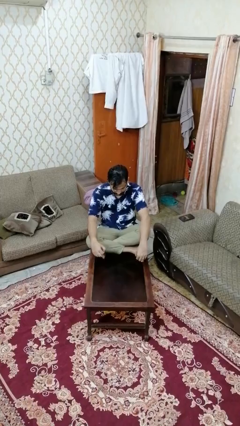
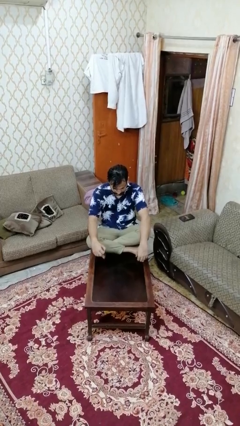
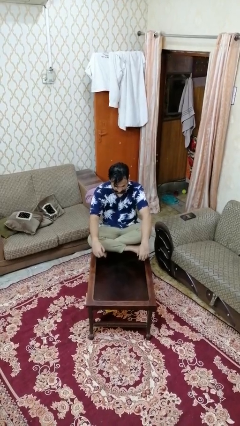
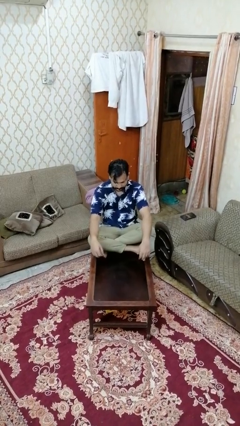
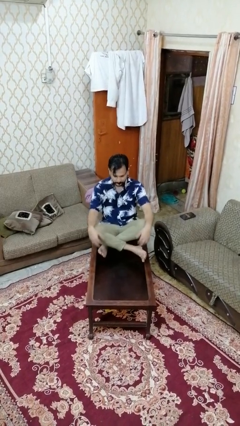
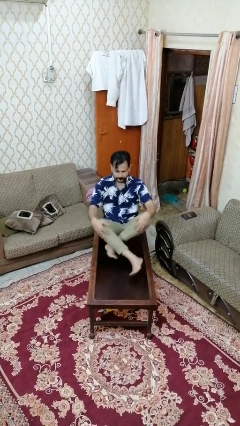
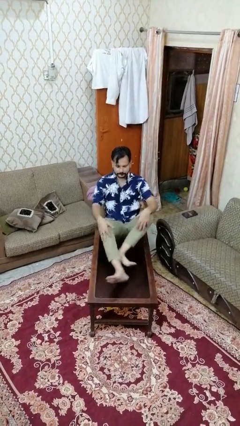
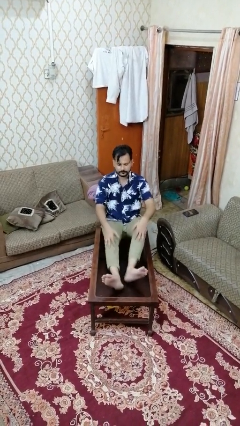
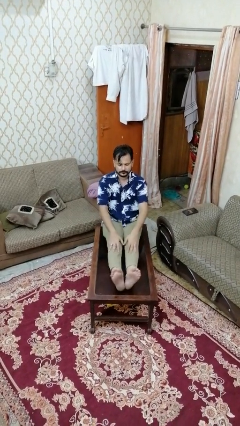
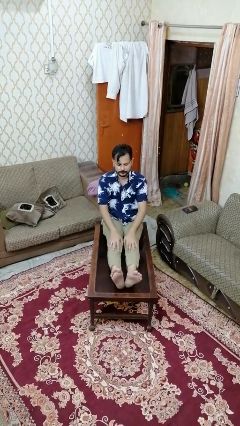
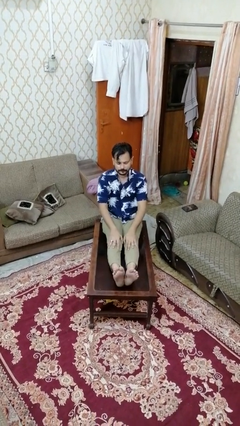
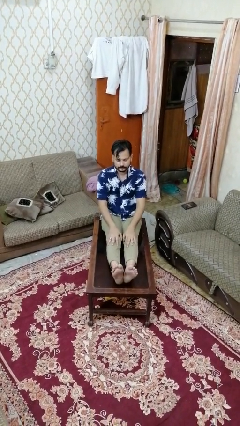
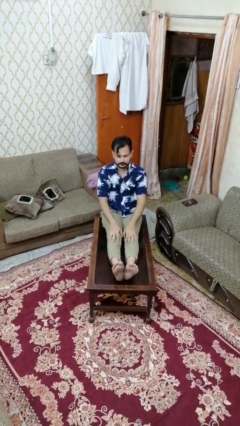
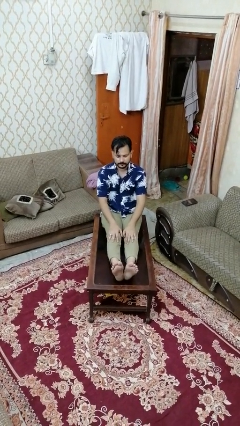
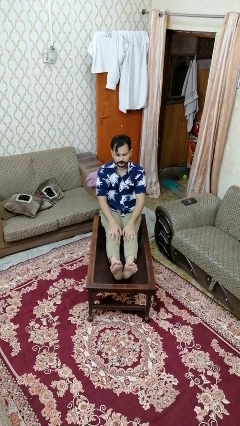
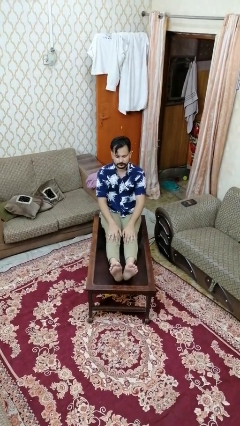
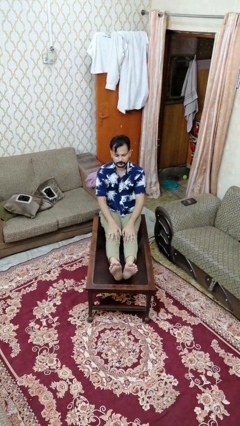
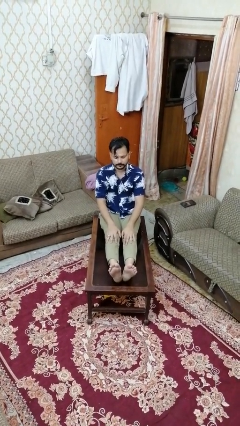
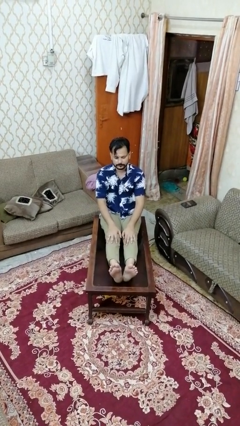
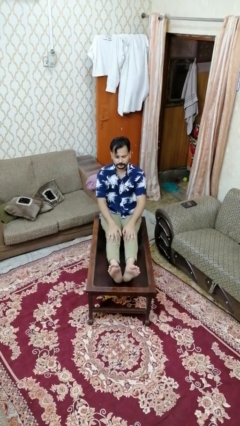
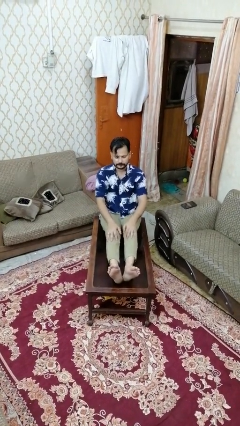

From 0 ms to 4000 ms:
person puts feet up

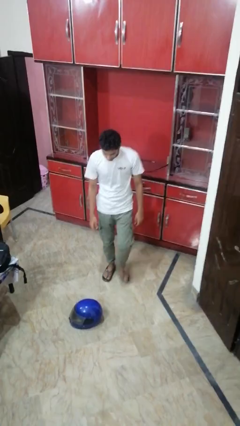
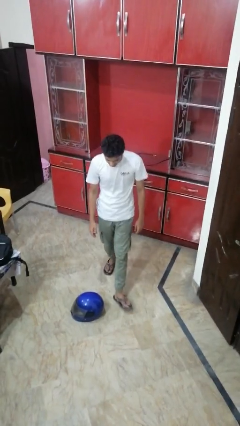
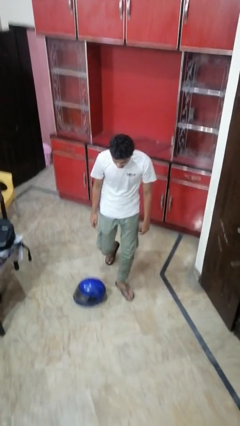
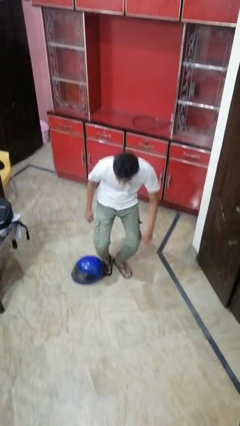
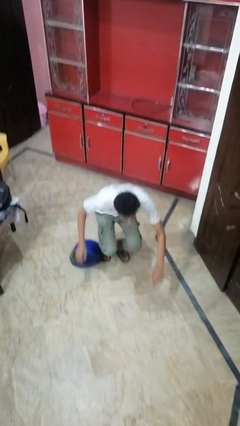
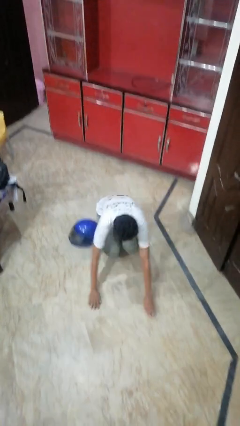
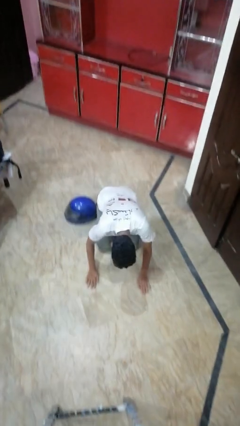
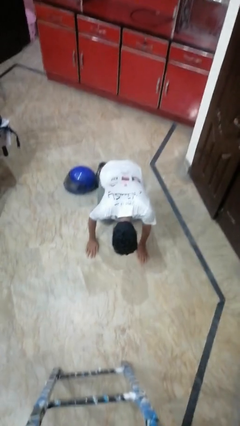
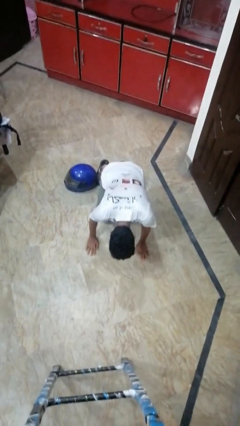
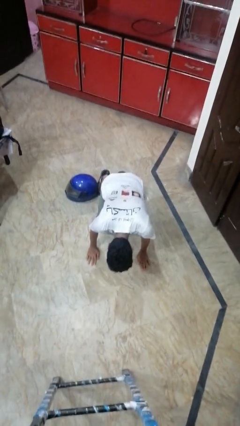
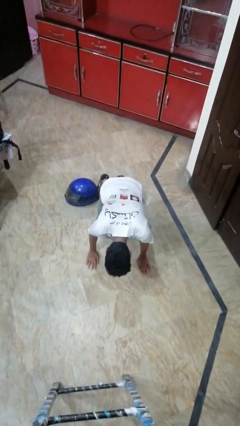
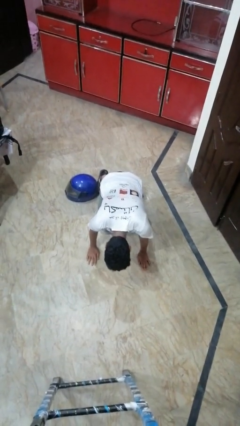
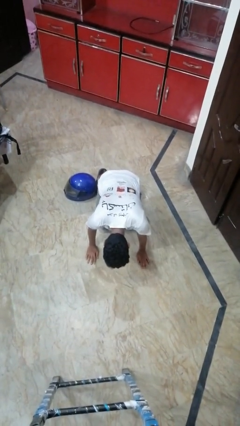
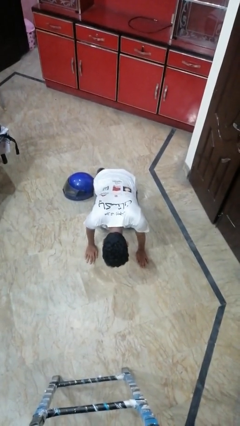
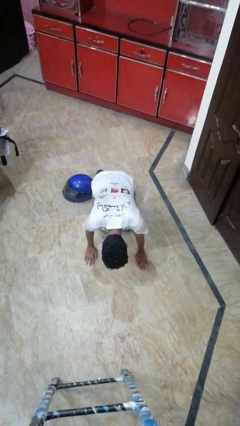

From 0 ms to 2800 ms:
person trips on object on floor

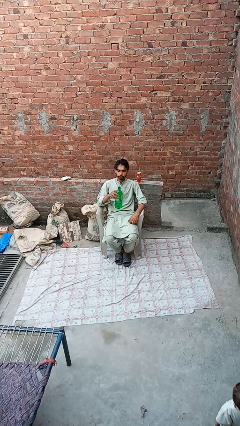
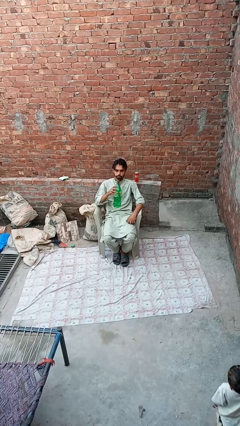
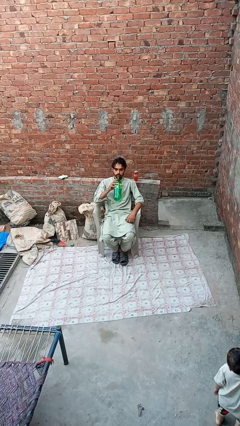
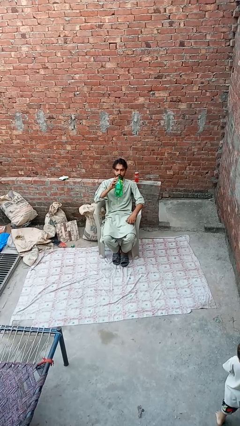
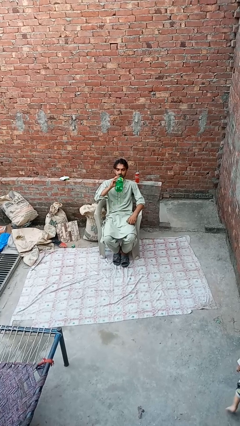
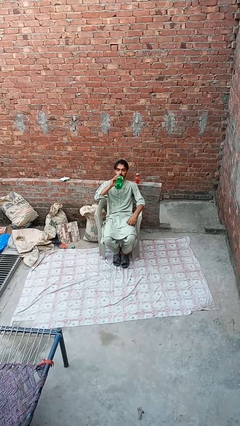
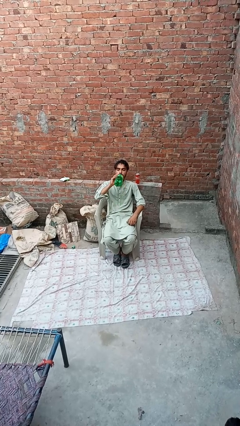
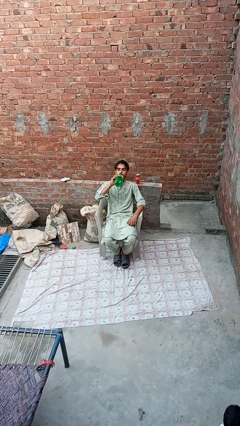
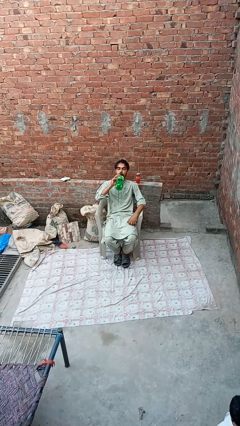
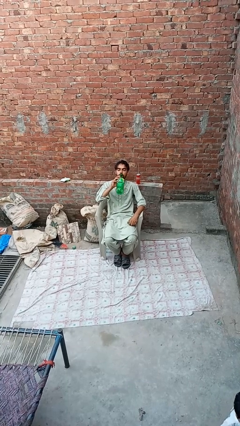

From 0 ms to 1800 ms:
person drinks from bottle

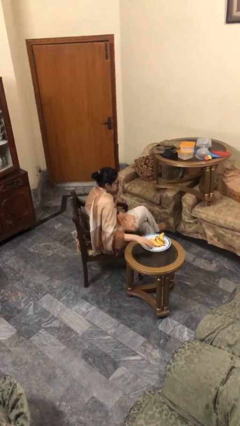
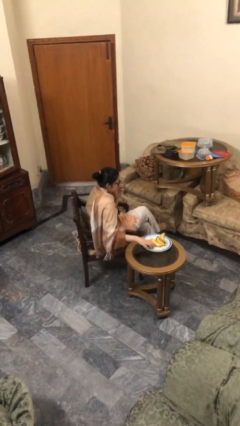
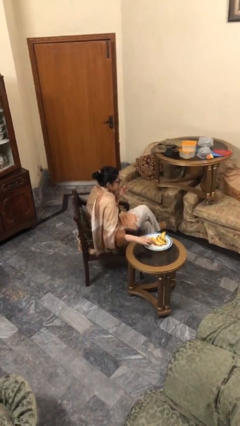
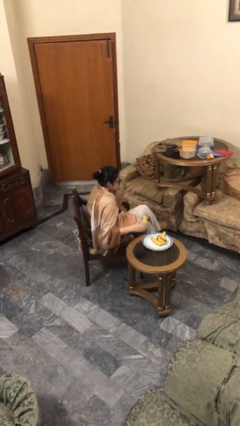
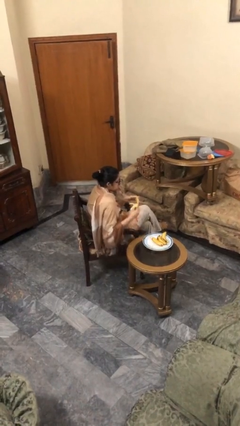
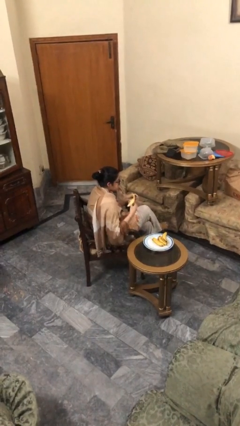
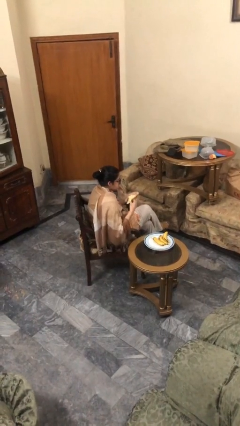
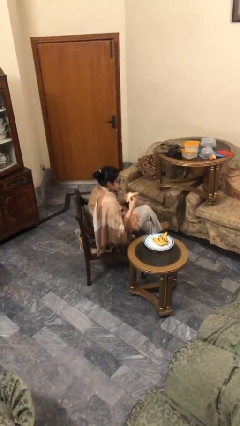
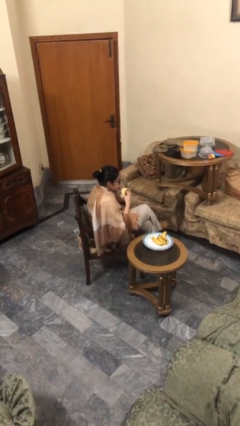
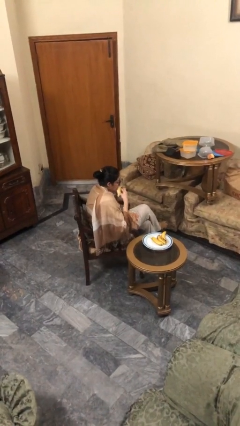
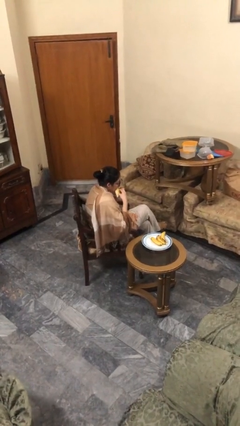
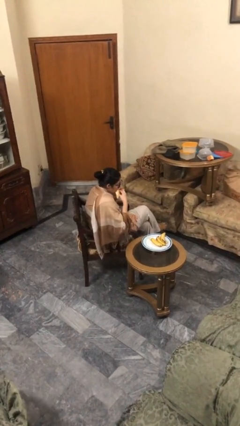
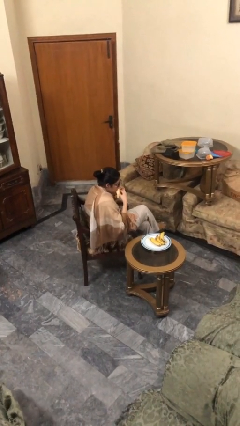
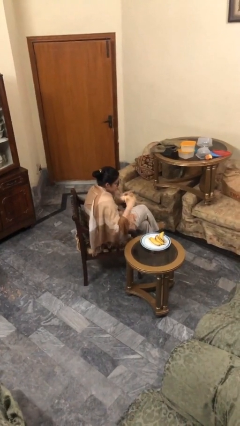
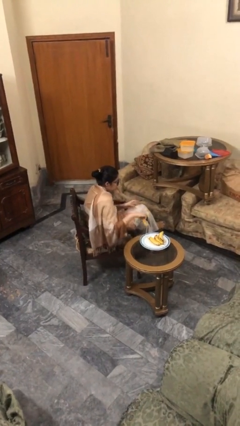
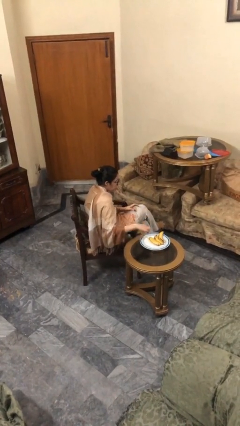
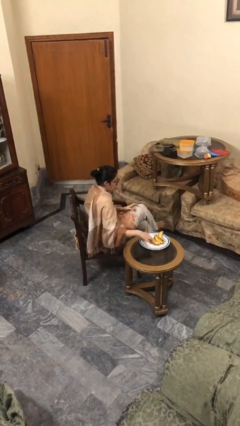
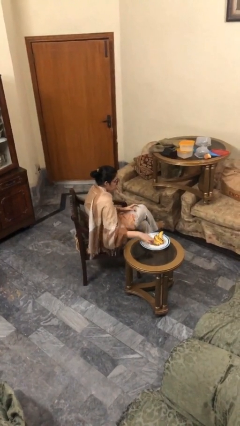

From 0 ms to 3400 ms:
person eats banana

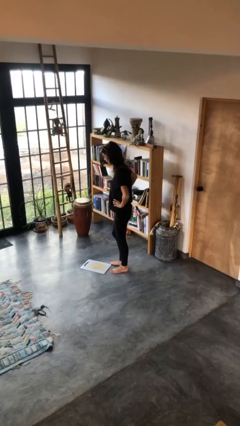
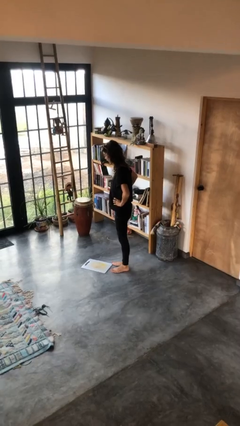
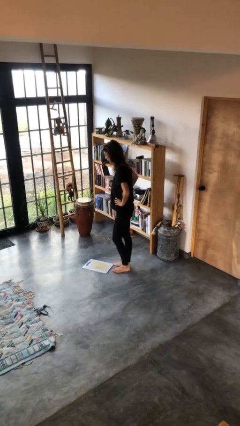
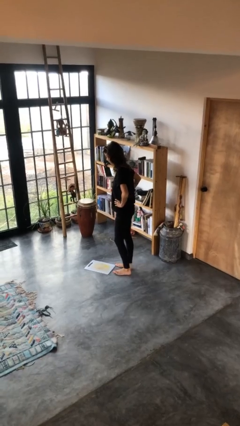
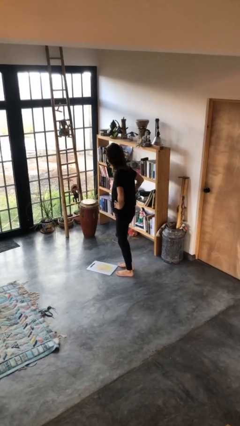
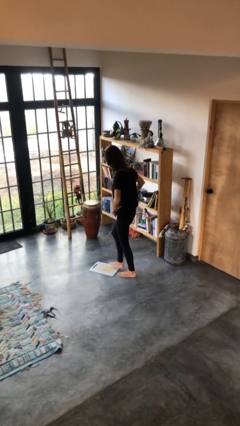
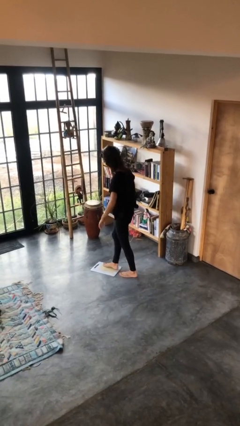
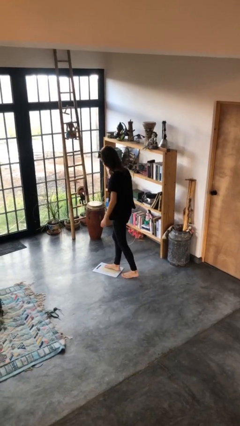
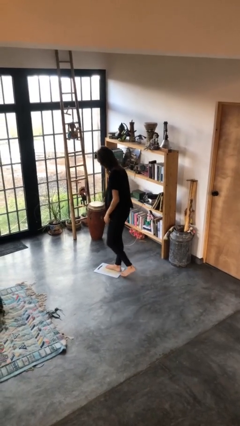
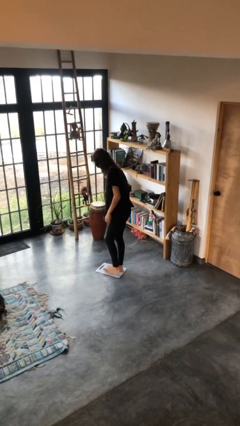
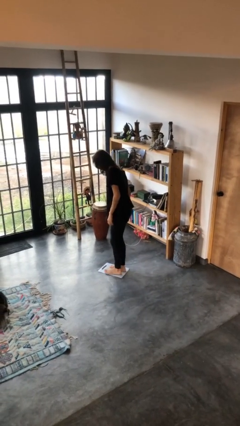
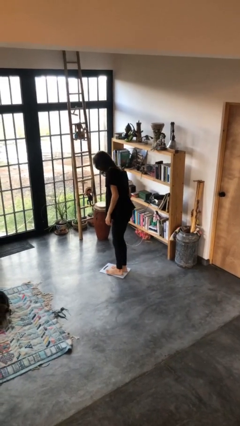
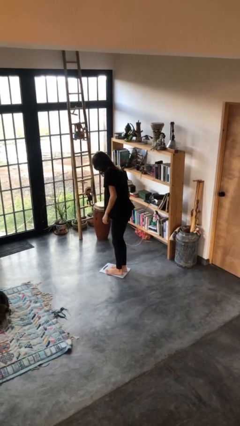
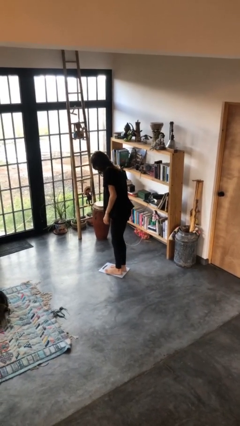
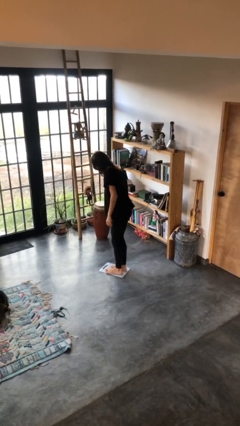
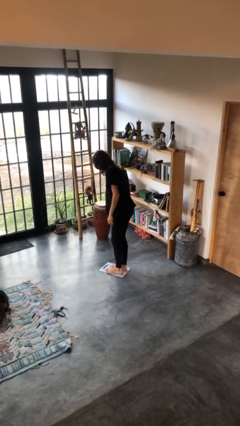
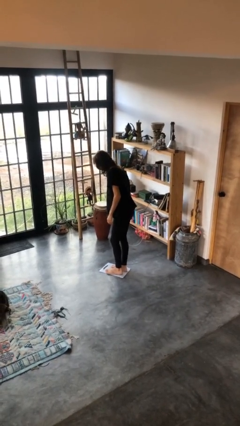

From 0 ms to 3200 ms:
person uses bodyweight scale

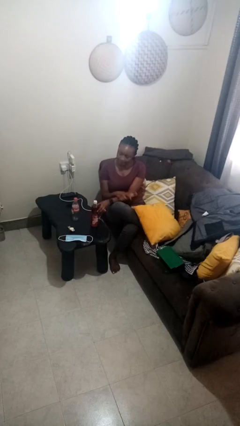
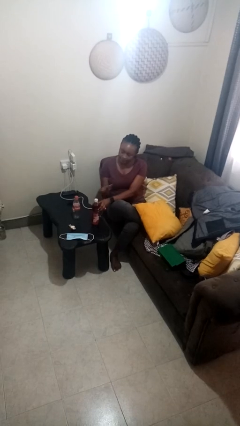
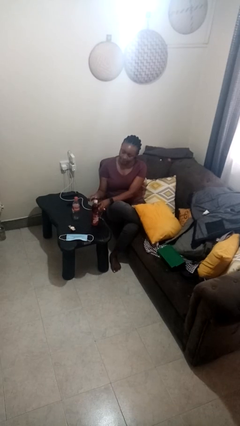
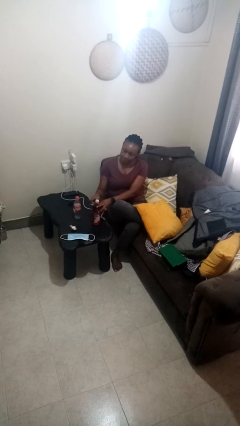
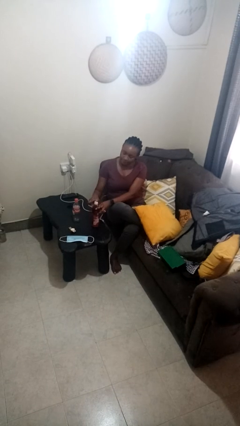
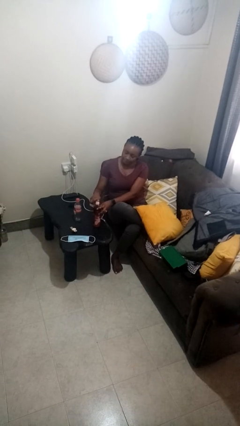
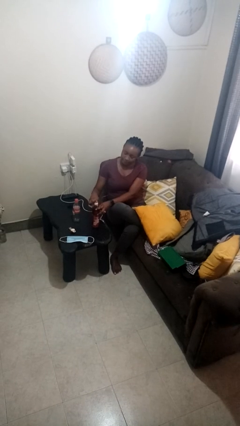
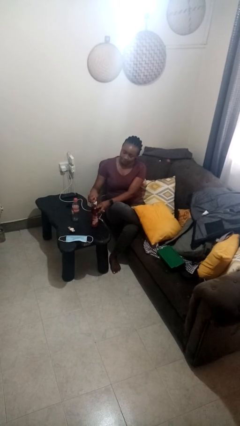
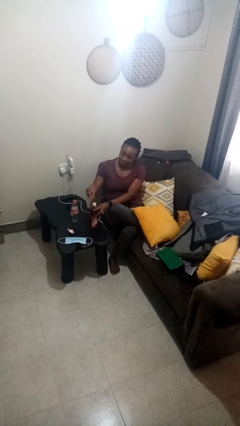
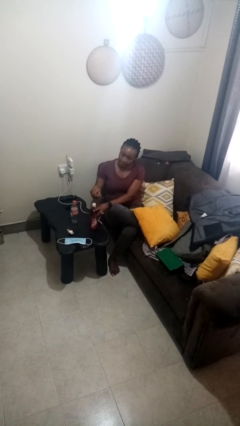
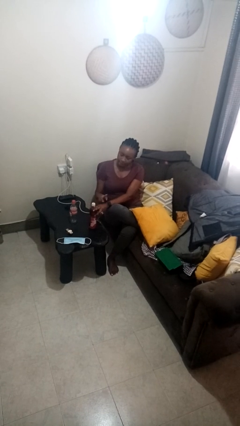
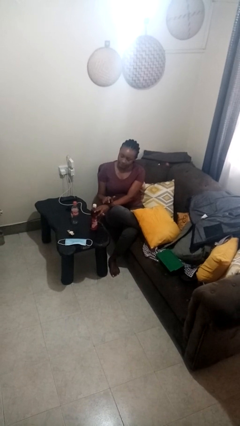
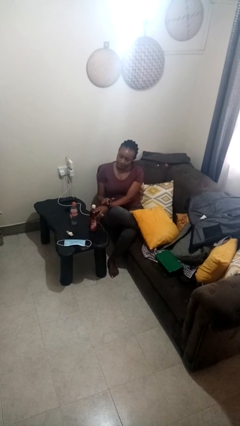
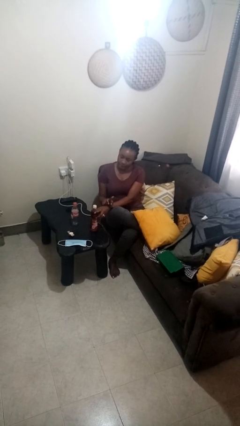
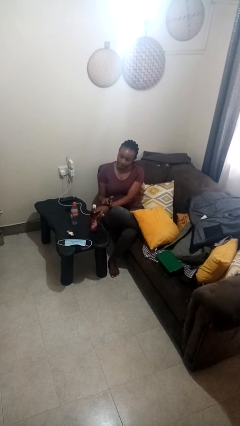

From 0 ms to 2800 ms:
person opens can with can opener
